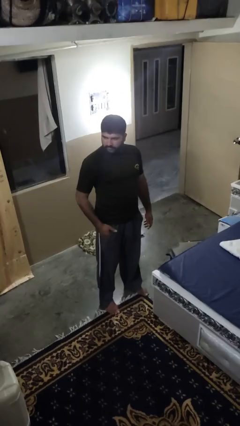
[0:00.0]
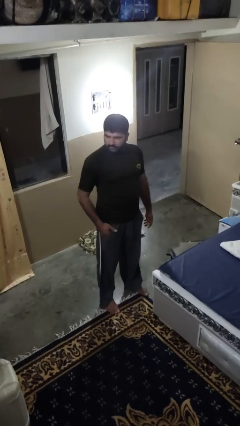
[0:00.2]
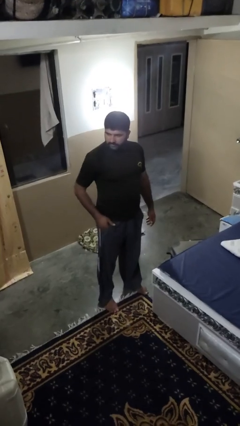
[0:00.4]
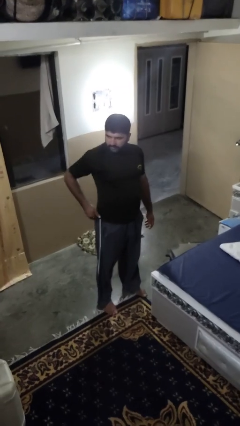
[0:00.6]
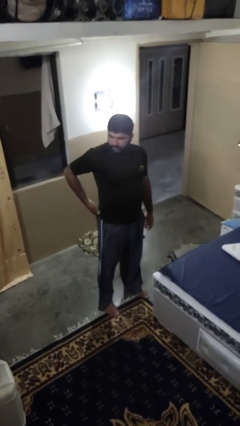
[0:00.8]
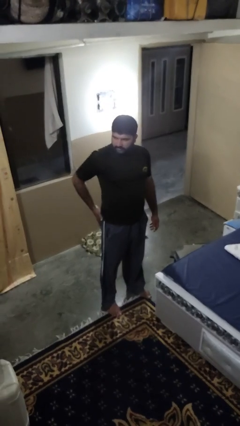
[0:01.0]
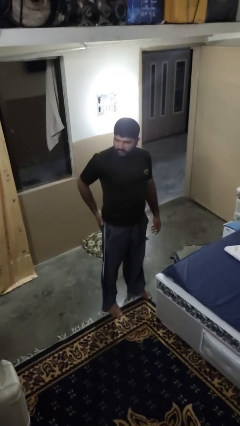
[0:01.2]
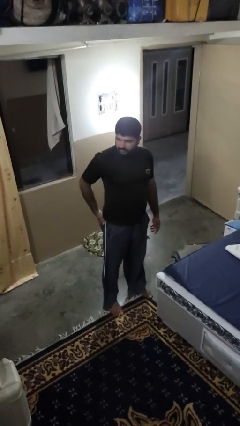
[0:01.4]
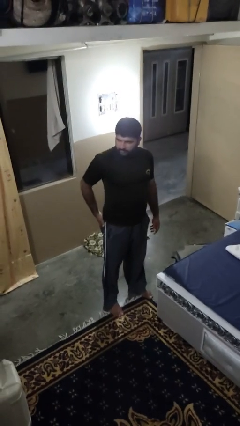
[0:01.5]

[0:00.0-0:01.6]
person puts hands in back pockets

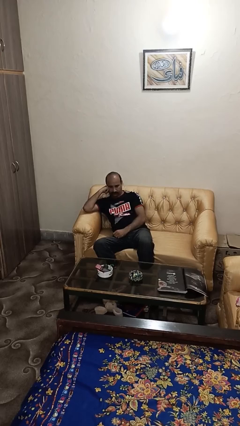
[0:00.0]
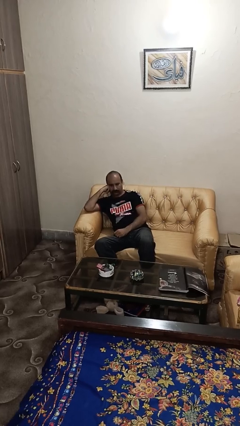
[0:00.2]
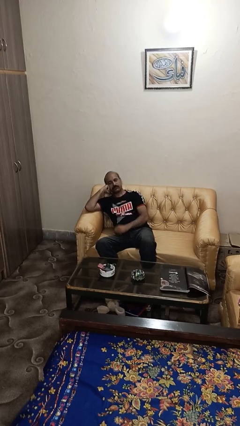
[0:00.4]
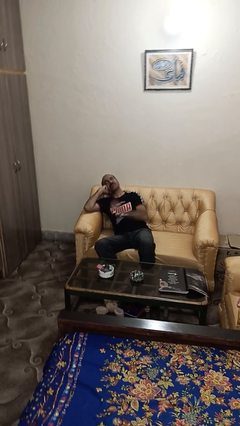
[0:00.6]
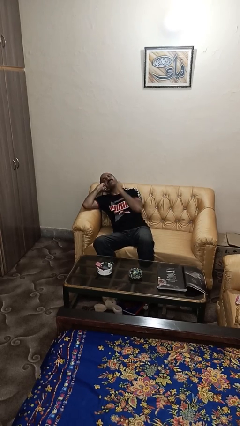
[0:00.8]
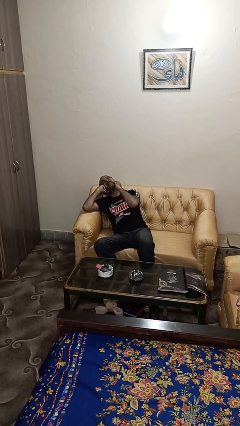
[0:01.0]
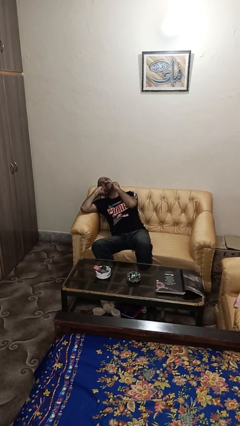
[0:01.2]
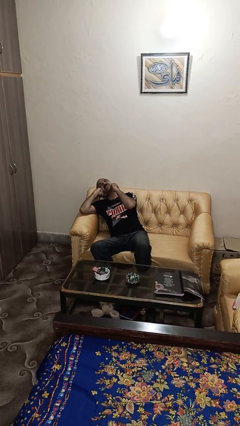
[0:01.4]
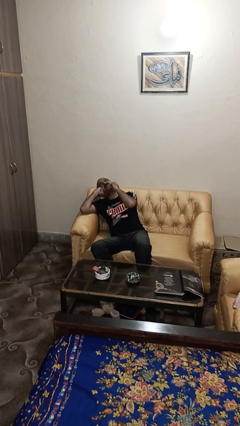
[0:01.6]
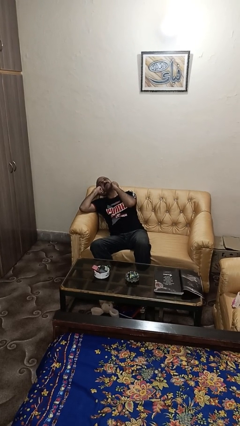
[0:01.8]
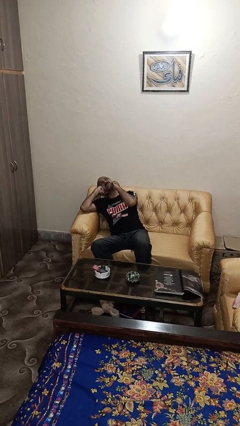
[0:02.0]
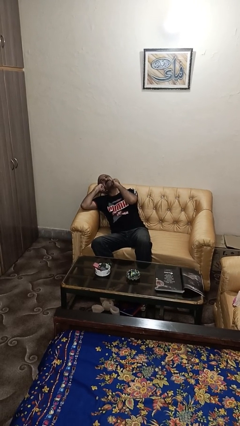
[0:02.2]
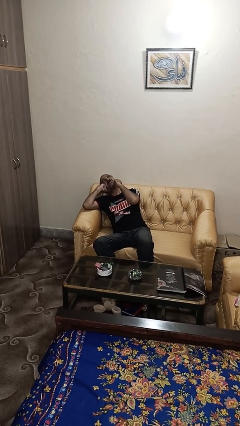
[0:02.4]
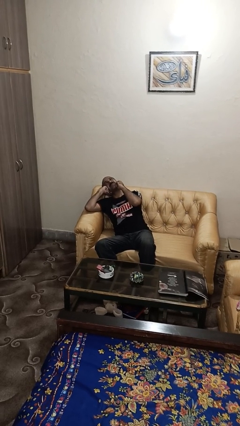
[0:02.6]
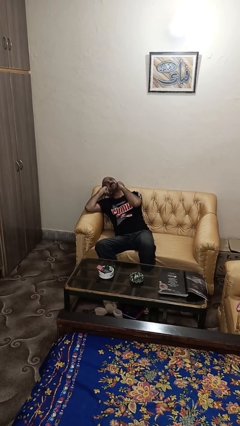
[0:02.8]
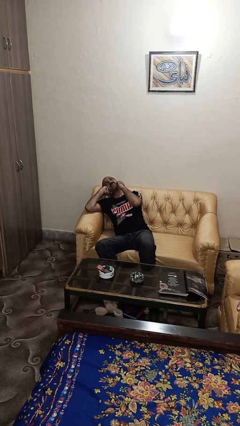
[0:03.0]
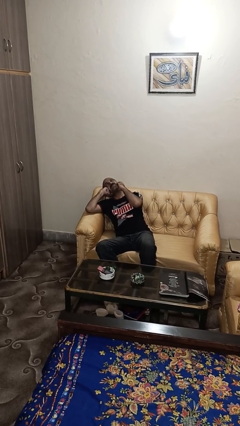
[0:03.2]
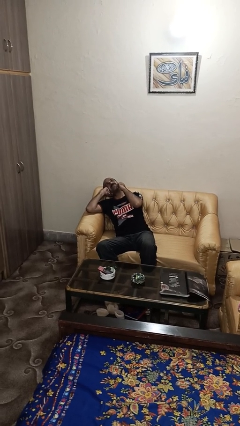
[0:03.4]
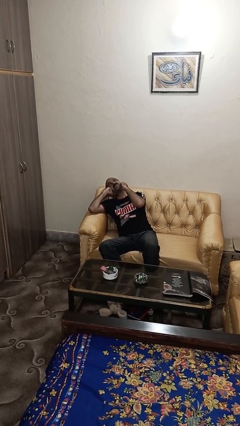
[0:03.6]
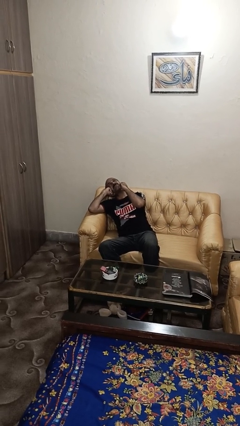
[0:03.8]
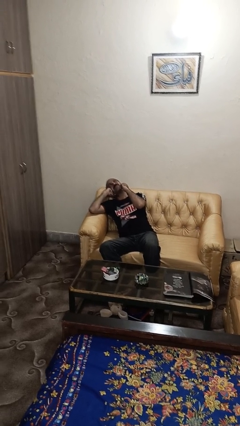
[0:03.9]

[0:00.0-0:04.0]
person strokes chin

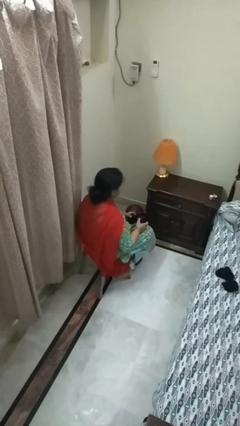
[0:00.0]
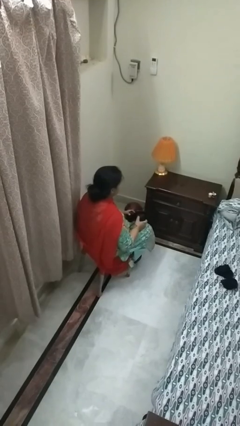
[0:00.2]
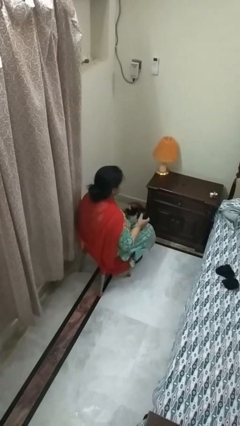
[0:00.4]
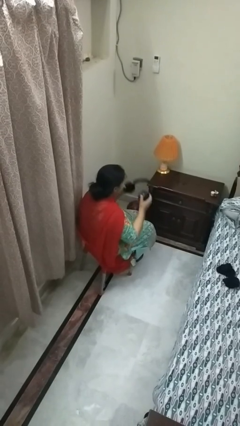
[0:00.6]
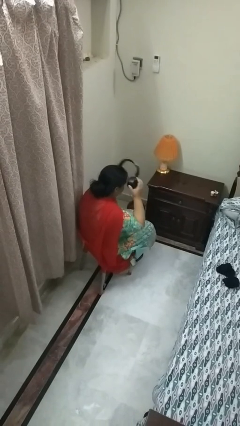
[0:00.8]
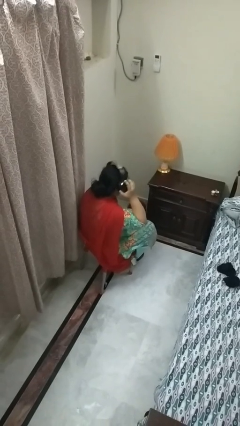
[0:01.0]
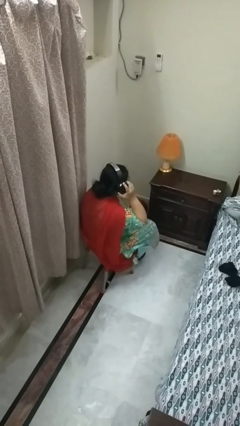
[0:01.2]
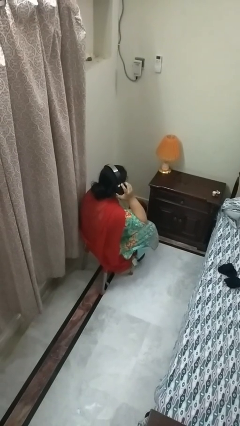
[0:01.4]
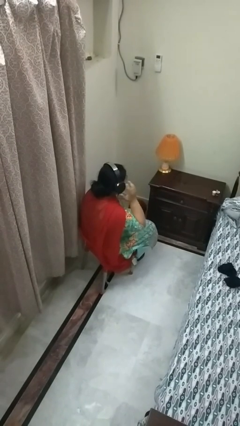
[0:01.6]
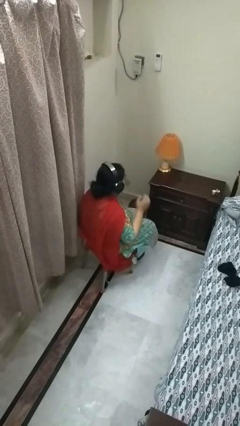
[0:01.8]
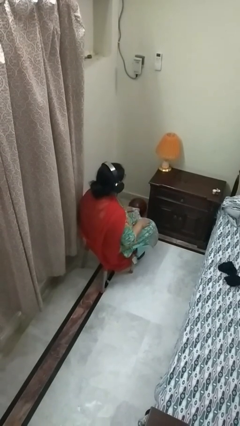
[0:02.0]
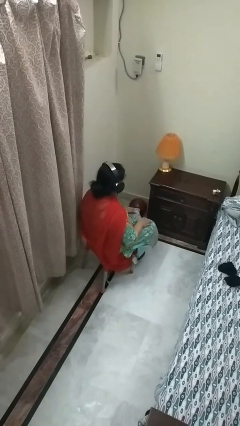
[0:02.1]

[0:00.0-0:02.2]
person puts on headphones

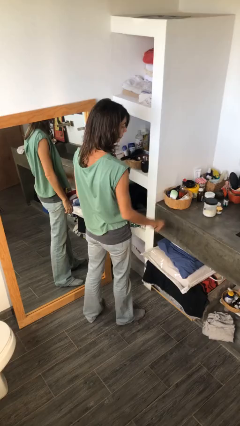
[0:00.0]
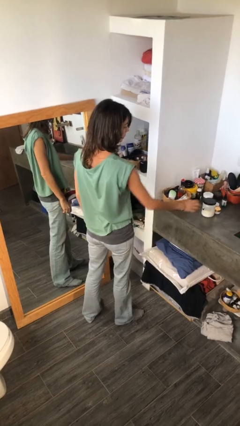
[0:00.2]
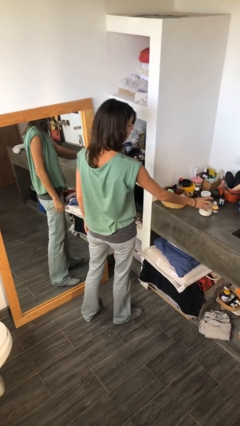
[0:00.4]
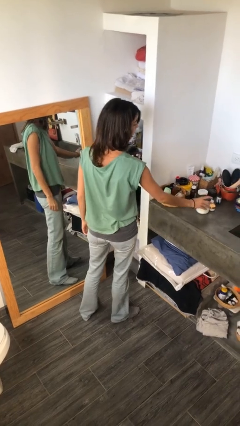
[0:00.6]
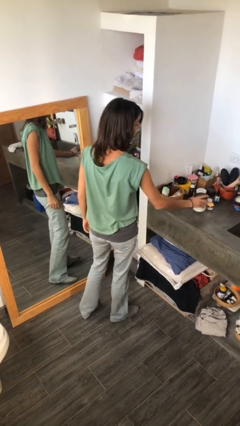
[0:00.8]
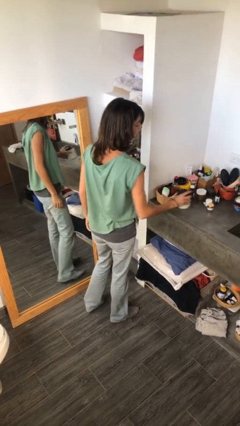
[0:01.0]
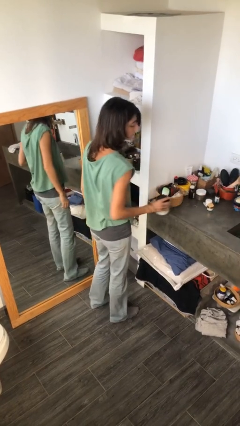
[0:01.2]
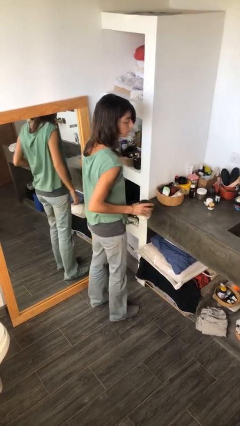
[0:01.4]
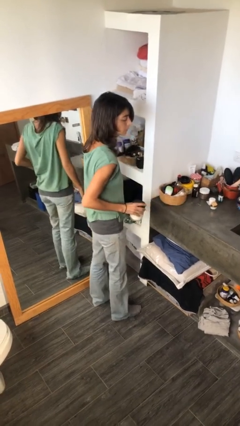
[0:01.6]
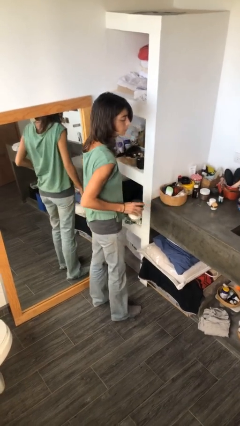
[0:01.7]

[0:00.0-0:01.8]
person picks up object from countertop

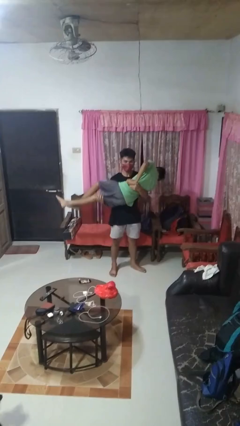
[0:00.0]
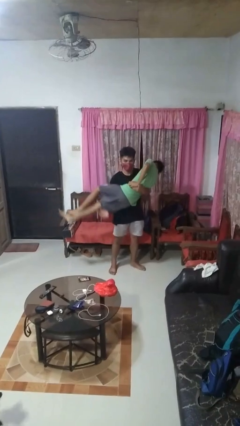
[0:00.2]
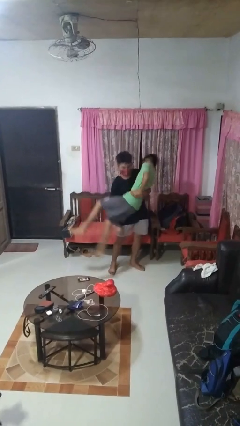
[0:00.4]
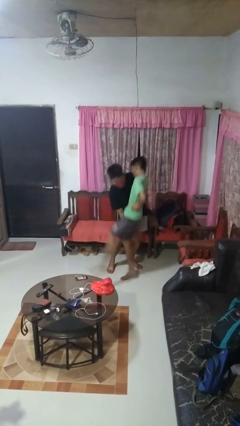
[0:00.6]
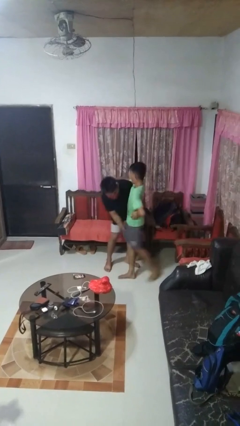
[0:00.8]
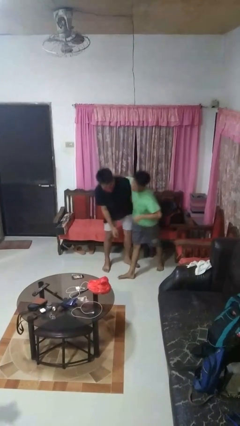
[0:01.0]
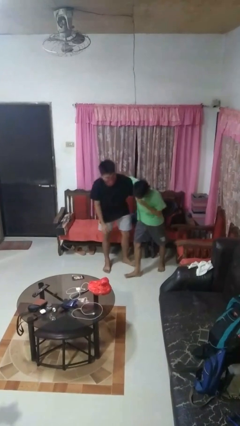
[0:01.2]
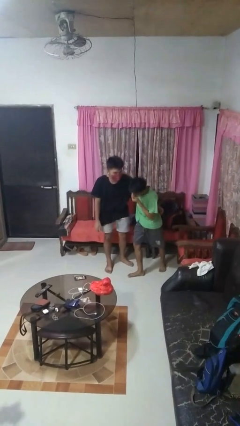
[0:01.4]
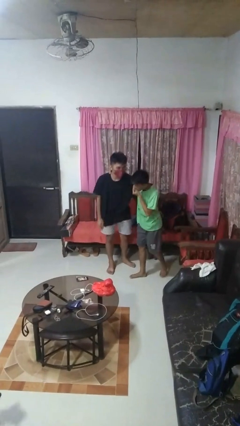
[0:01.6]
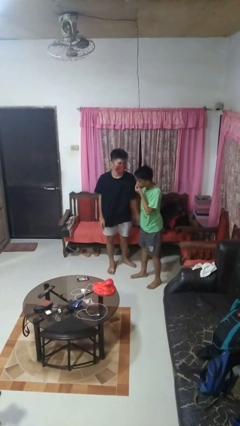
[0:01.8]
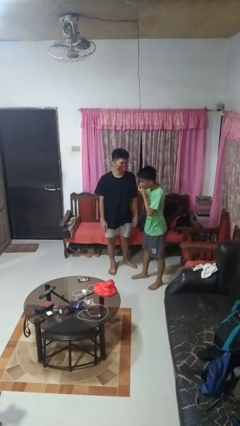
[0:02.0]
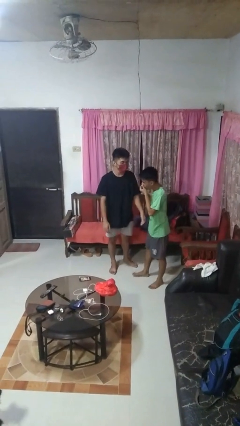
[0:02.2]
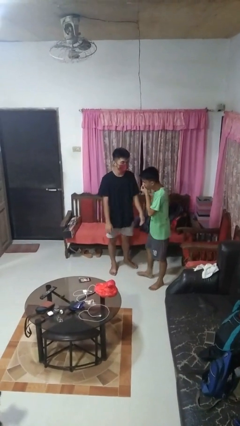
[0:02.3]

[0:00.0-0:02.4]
person puts down person

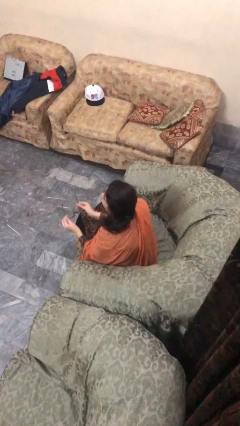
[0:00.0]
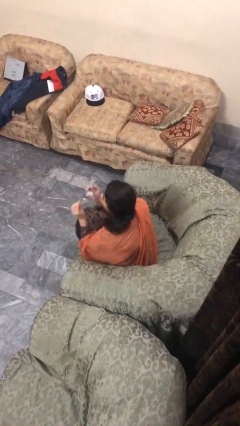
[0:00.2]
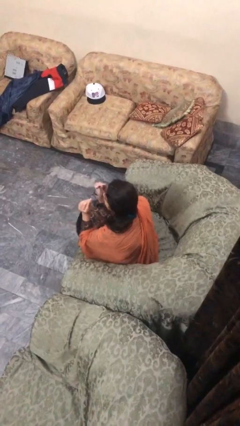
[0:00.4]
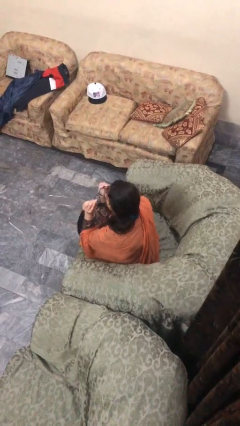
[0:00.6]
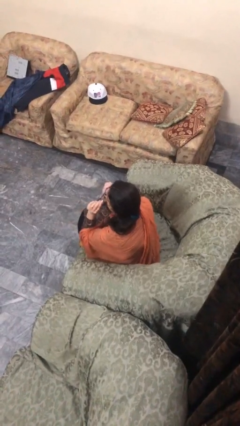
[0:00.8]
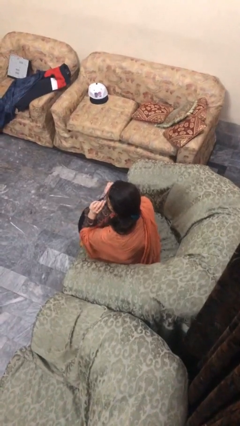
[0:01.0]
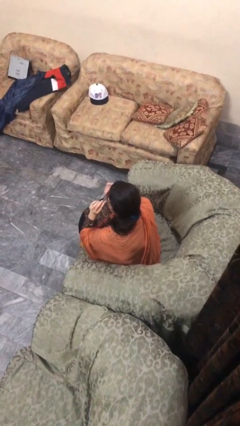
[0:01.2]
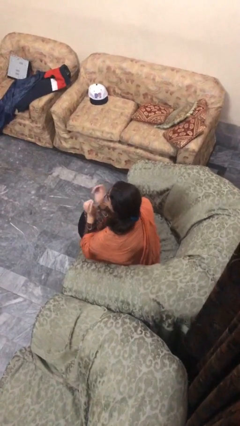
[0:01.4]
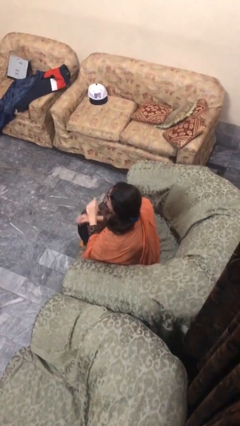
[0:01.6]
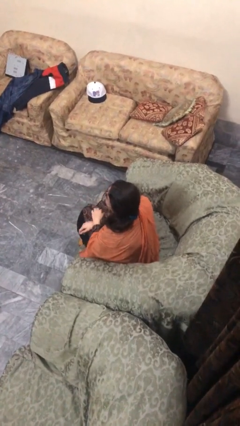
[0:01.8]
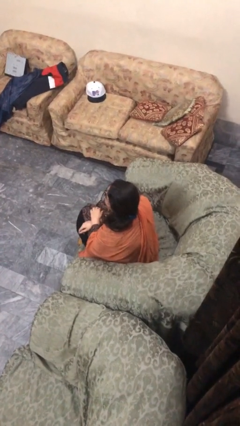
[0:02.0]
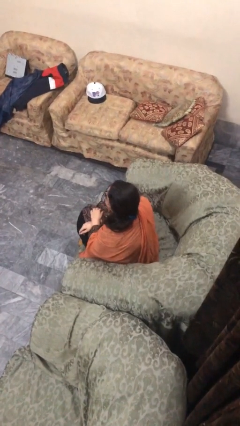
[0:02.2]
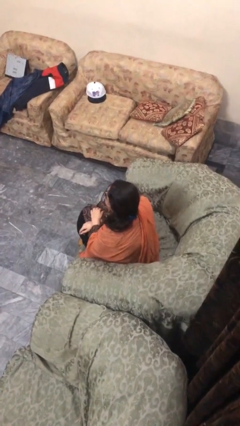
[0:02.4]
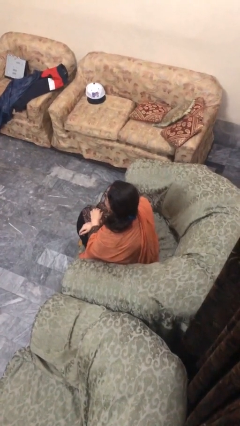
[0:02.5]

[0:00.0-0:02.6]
person puts on glasses

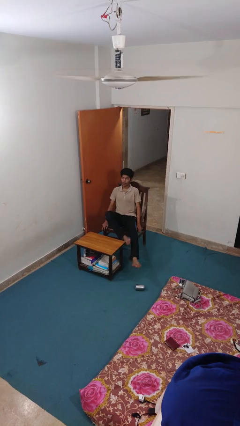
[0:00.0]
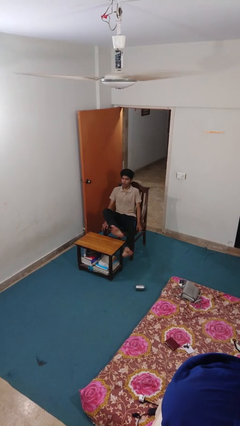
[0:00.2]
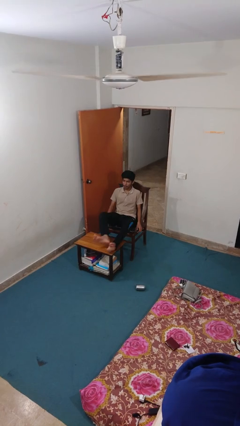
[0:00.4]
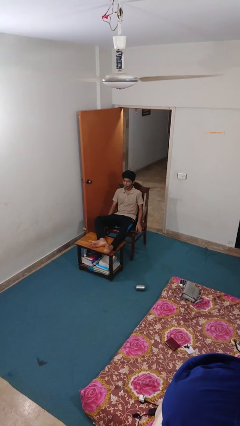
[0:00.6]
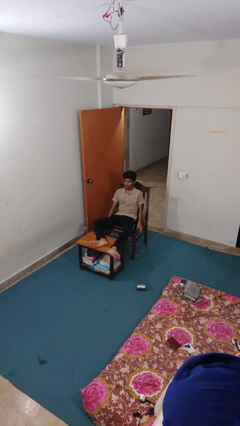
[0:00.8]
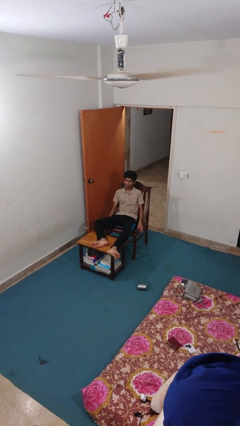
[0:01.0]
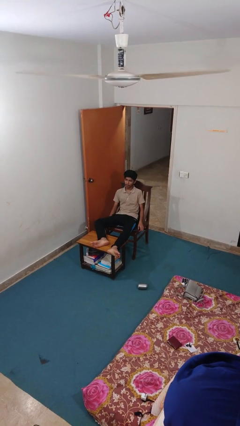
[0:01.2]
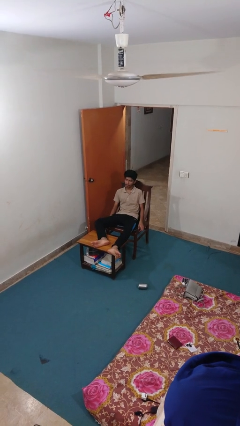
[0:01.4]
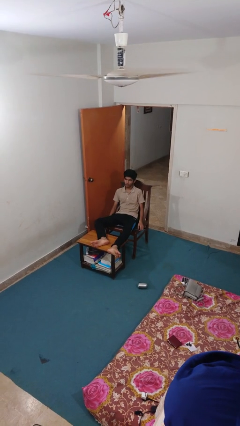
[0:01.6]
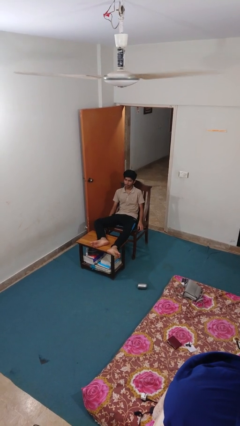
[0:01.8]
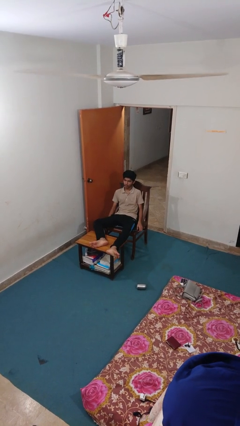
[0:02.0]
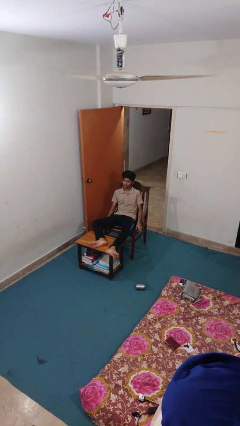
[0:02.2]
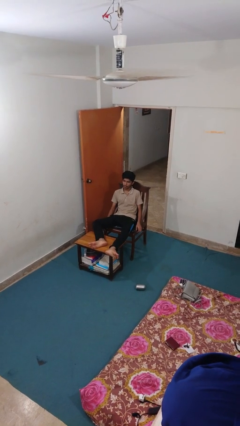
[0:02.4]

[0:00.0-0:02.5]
person puts feet up
